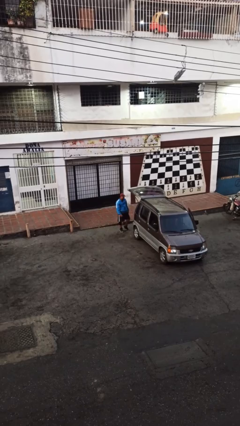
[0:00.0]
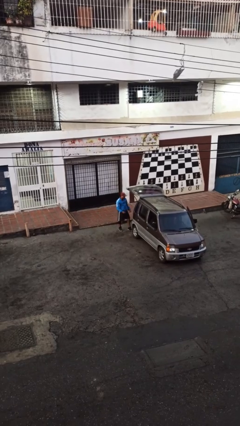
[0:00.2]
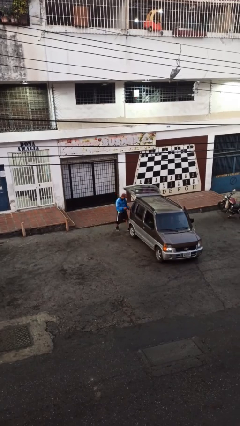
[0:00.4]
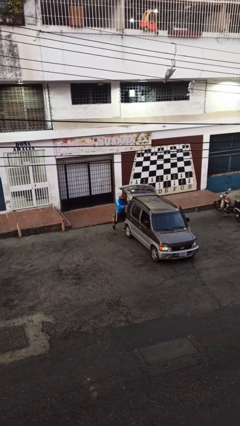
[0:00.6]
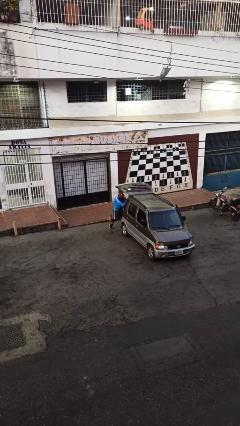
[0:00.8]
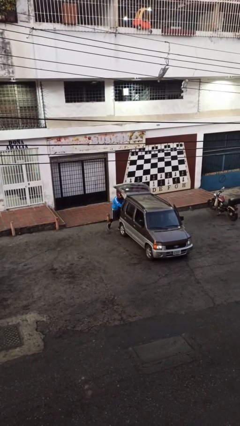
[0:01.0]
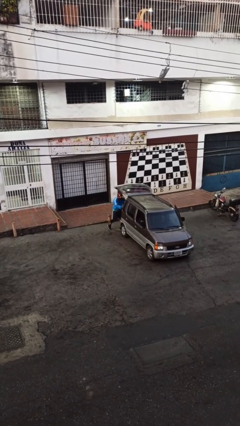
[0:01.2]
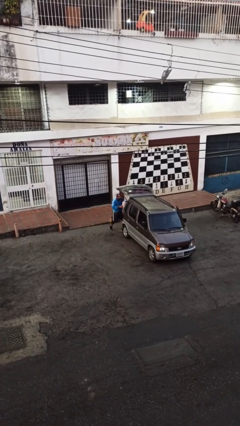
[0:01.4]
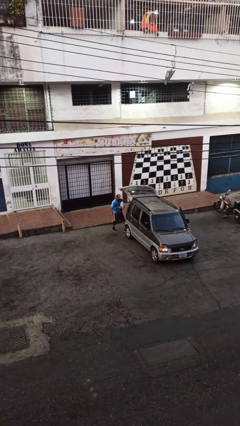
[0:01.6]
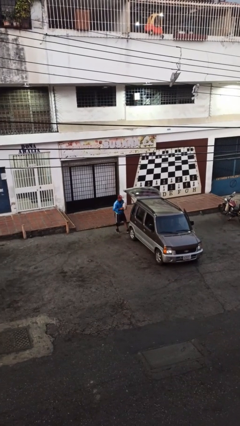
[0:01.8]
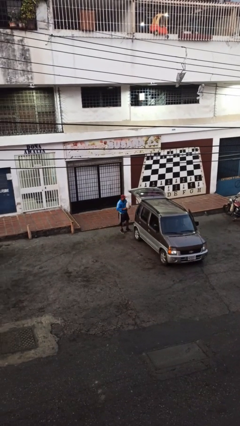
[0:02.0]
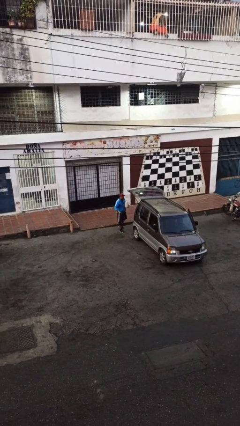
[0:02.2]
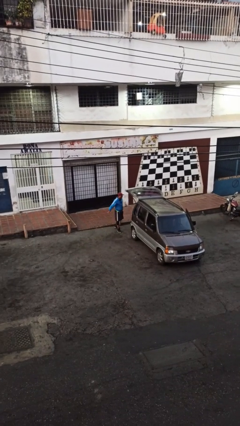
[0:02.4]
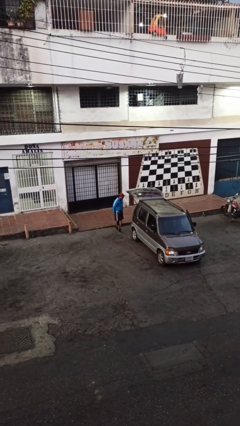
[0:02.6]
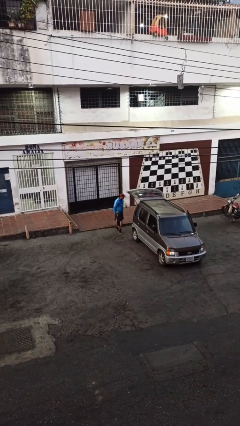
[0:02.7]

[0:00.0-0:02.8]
person unloads car

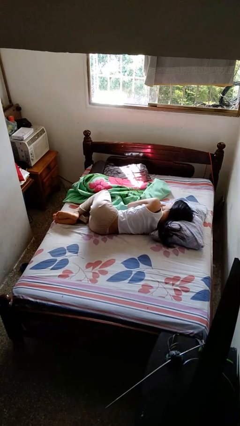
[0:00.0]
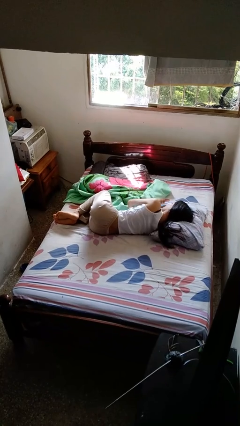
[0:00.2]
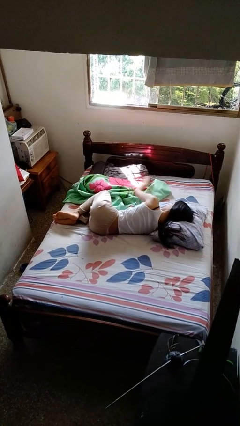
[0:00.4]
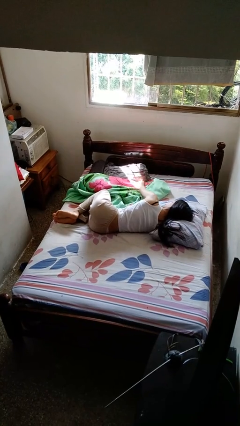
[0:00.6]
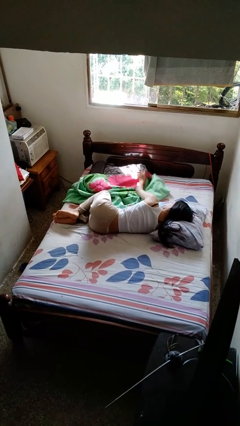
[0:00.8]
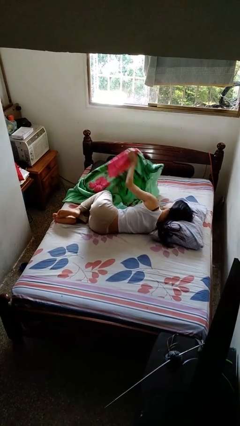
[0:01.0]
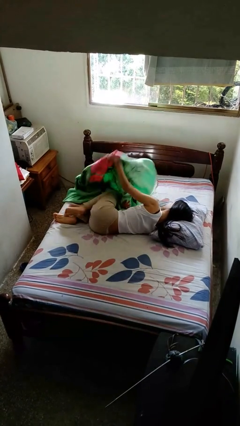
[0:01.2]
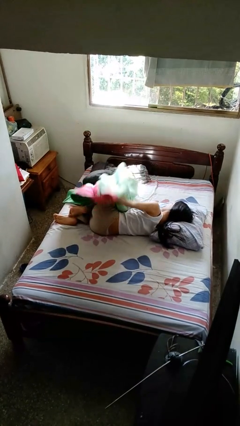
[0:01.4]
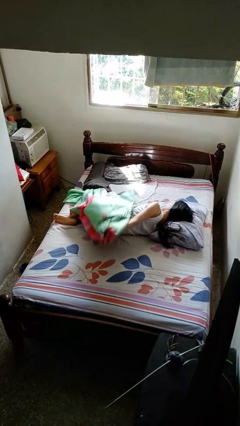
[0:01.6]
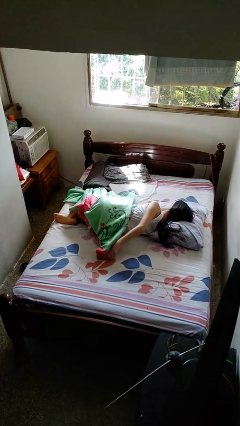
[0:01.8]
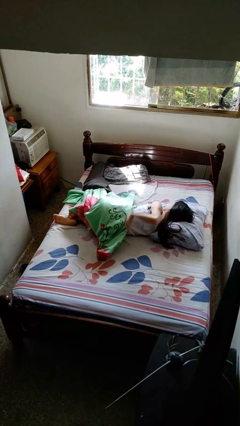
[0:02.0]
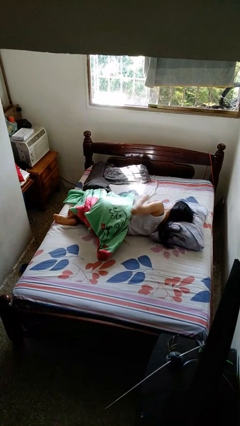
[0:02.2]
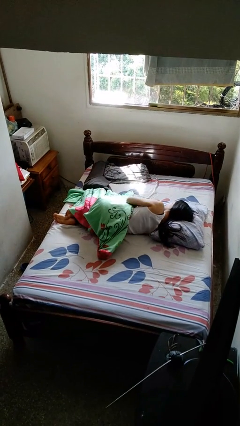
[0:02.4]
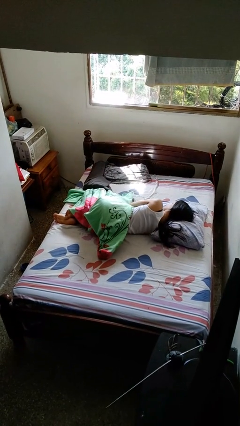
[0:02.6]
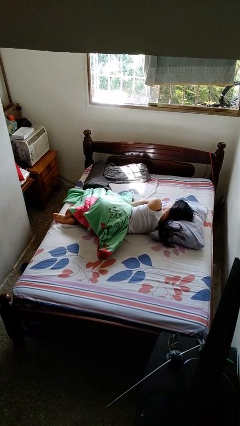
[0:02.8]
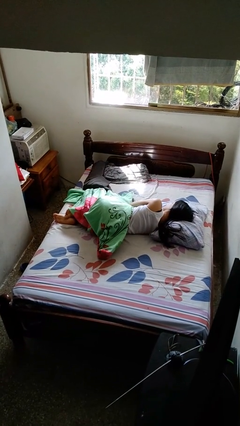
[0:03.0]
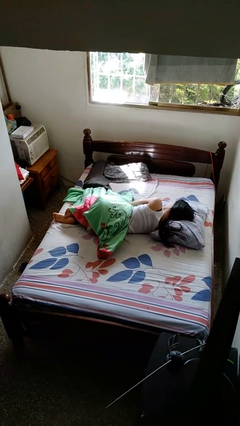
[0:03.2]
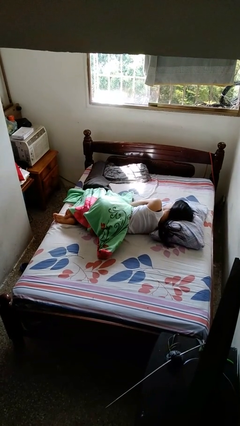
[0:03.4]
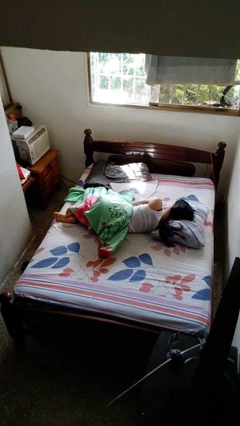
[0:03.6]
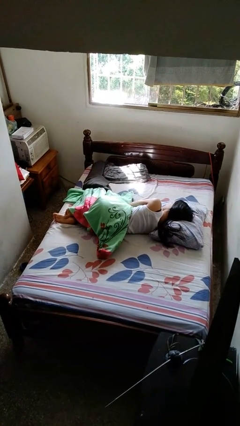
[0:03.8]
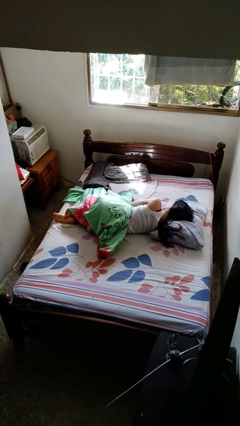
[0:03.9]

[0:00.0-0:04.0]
person covers with bedsheets

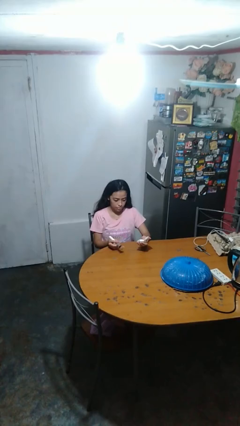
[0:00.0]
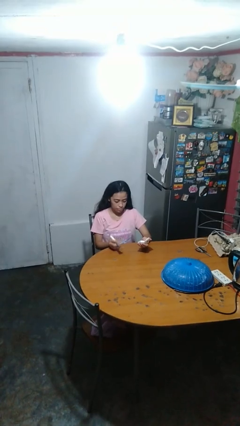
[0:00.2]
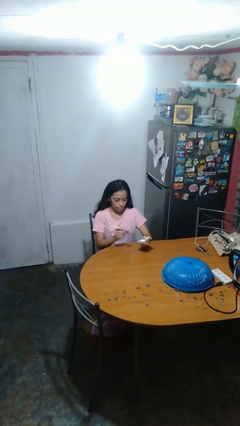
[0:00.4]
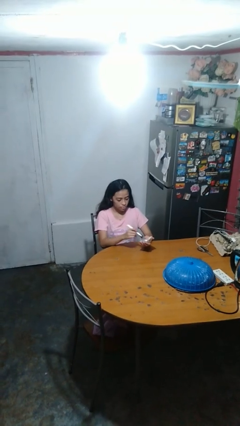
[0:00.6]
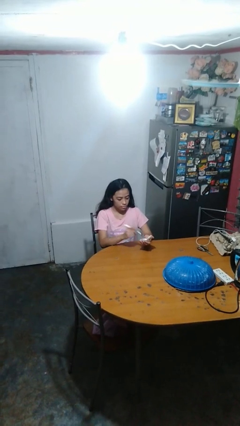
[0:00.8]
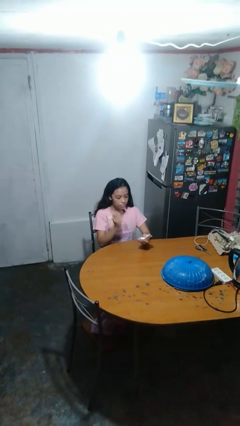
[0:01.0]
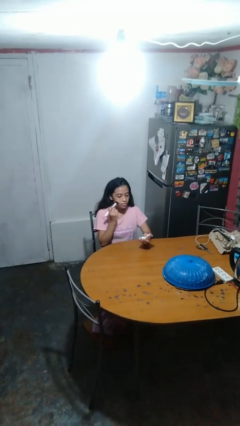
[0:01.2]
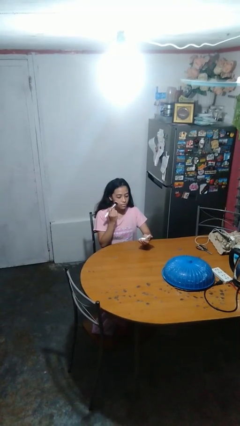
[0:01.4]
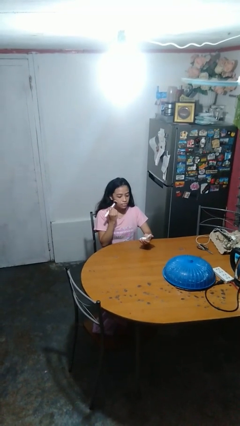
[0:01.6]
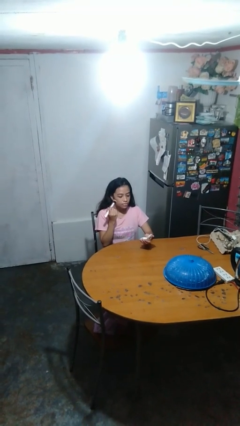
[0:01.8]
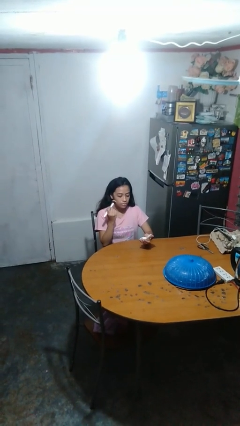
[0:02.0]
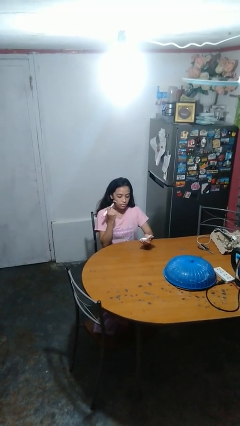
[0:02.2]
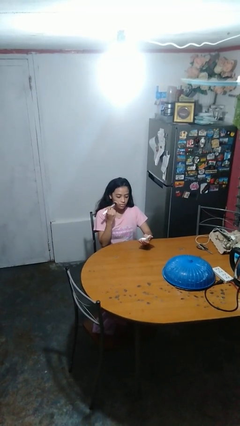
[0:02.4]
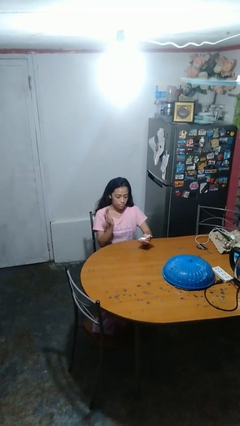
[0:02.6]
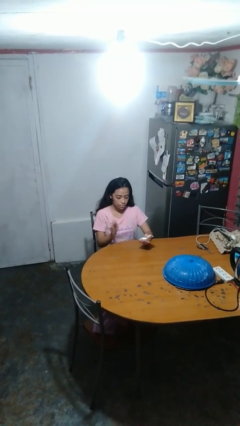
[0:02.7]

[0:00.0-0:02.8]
person applies foundation makeup

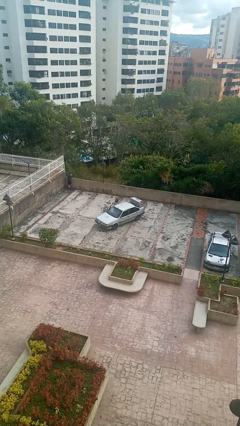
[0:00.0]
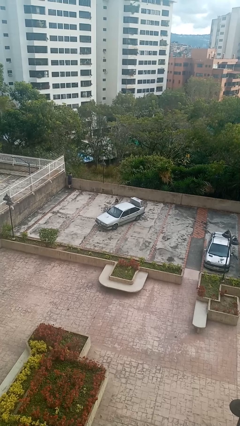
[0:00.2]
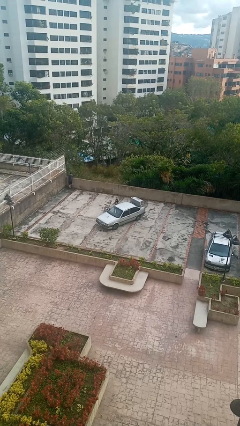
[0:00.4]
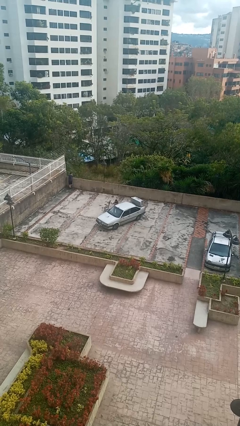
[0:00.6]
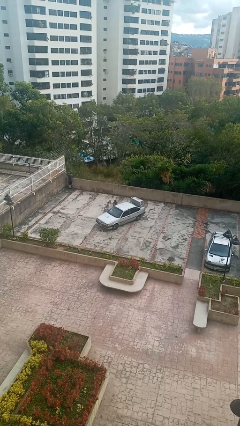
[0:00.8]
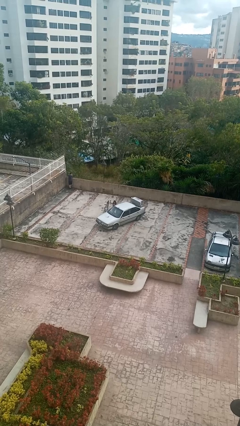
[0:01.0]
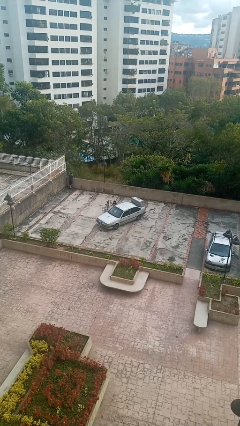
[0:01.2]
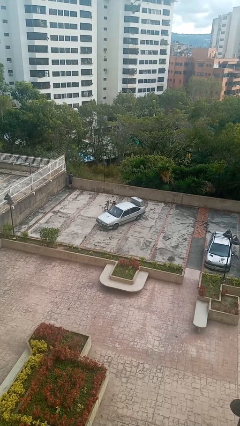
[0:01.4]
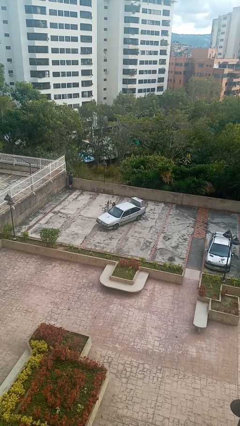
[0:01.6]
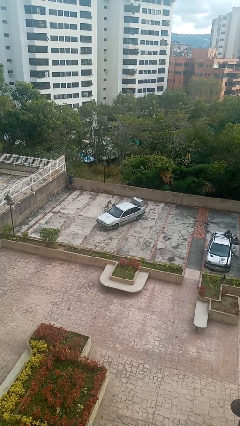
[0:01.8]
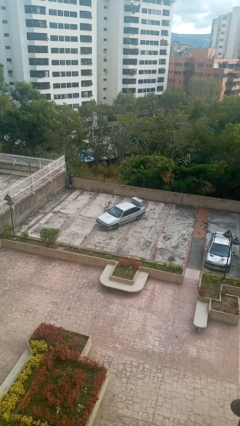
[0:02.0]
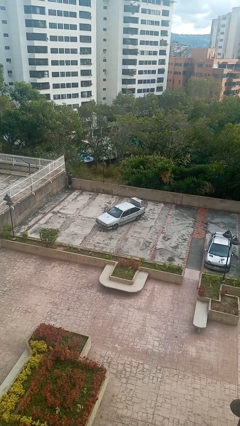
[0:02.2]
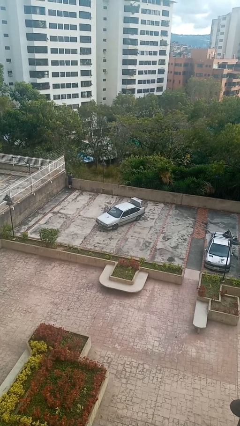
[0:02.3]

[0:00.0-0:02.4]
car picks up person

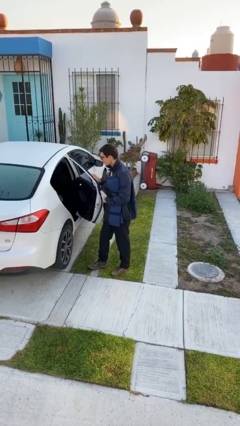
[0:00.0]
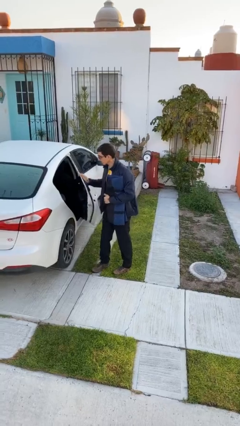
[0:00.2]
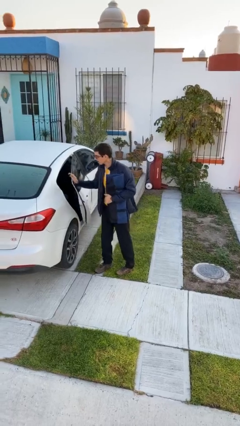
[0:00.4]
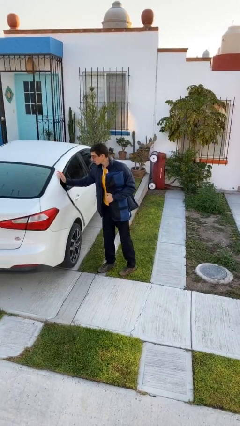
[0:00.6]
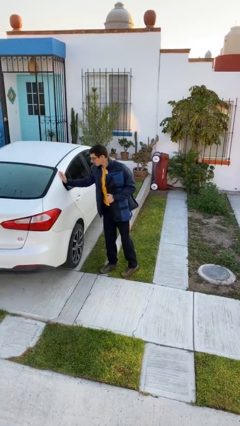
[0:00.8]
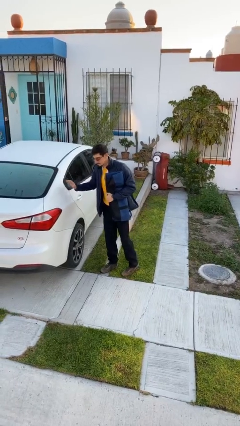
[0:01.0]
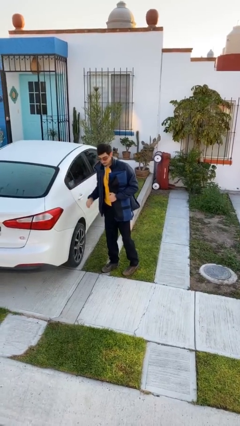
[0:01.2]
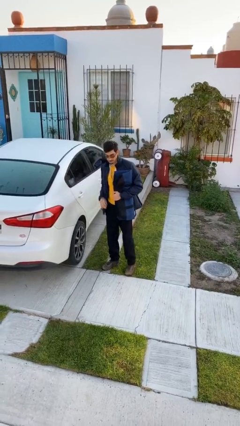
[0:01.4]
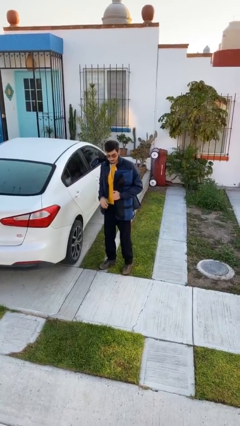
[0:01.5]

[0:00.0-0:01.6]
person closes car door

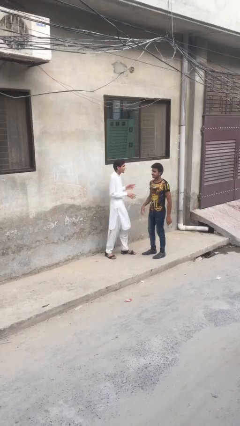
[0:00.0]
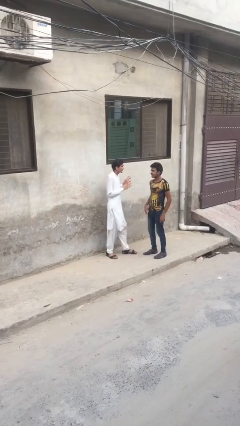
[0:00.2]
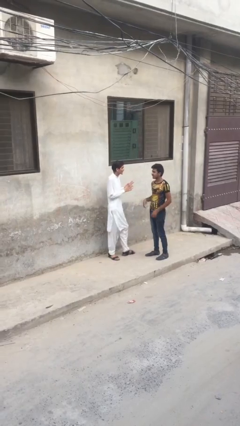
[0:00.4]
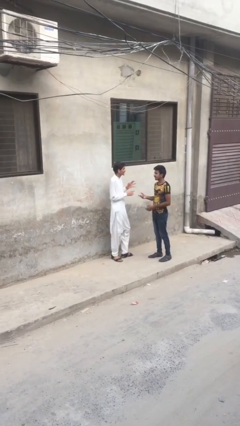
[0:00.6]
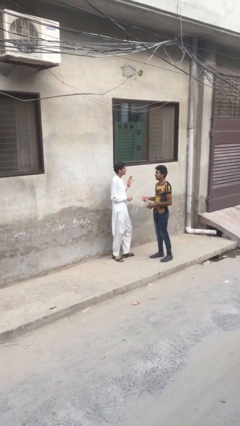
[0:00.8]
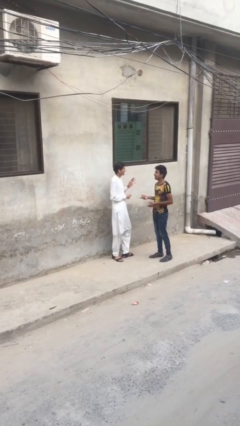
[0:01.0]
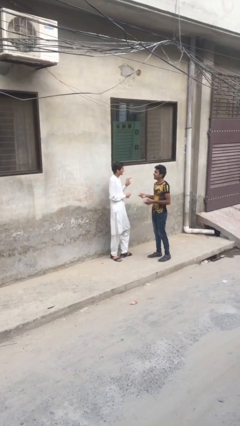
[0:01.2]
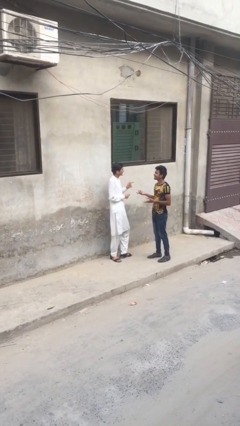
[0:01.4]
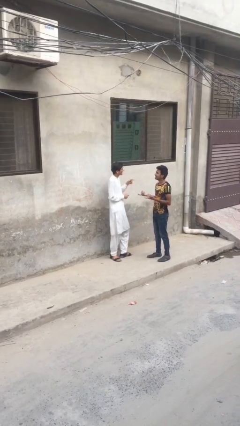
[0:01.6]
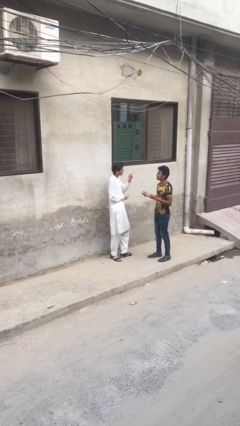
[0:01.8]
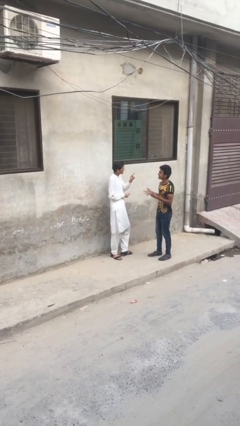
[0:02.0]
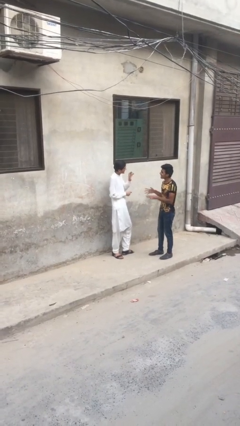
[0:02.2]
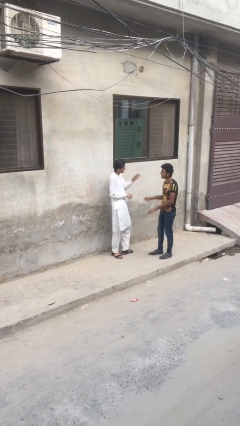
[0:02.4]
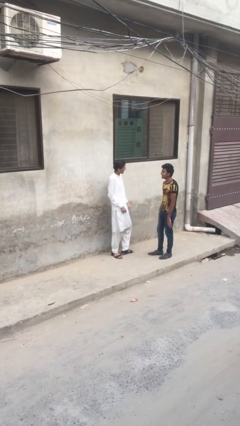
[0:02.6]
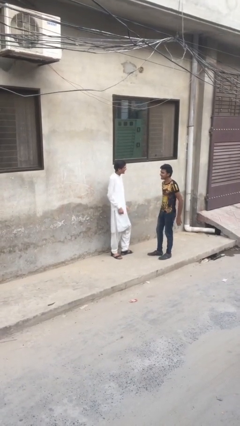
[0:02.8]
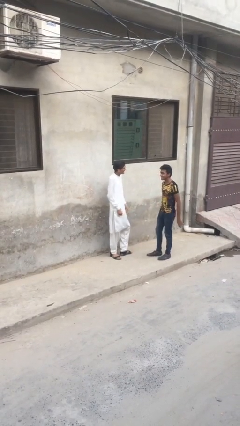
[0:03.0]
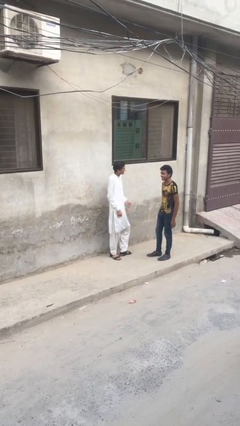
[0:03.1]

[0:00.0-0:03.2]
person talks to person

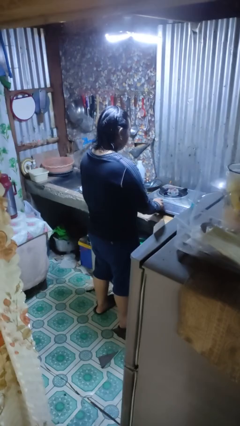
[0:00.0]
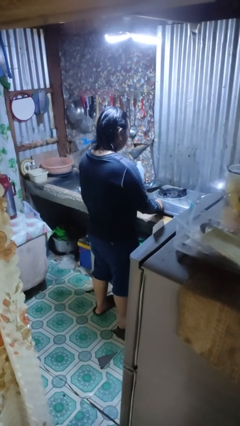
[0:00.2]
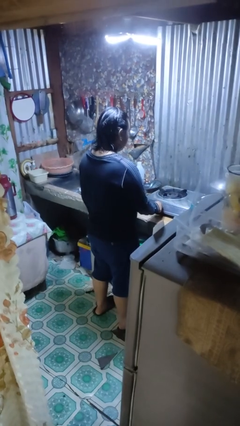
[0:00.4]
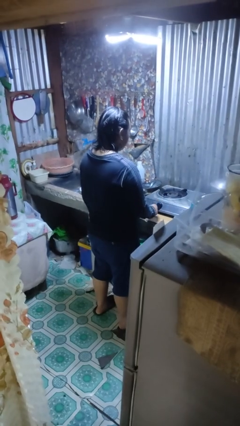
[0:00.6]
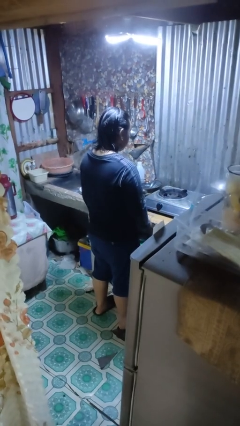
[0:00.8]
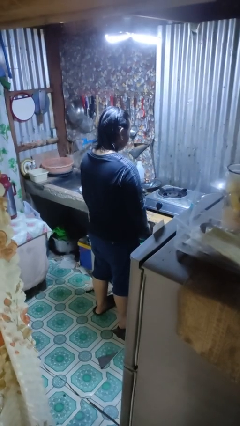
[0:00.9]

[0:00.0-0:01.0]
person turns off stovetop
